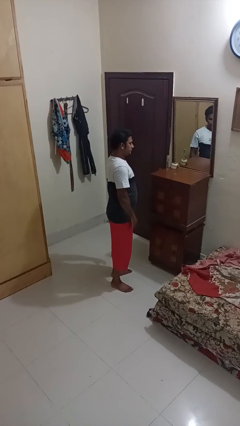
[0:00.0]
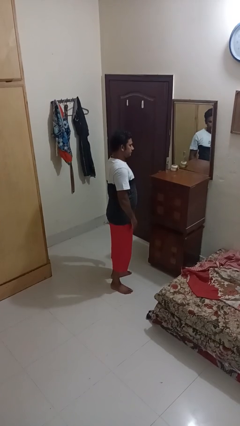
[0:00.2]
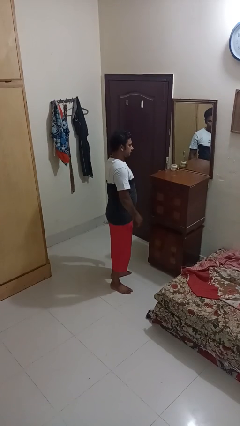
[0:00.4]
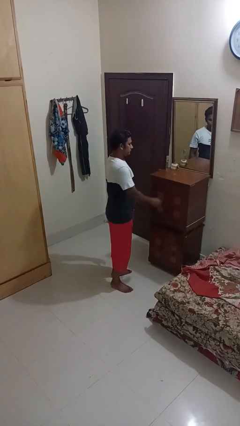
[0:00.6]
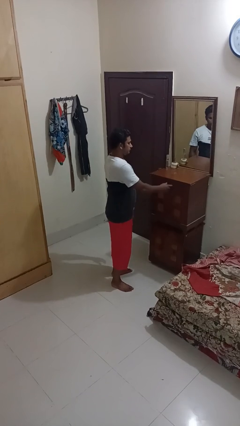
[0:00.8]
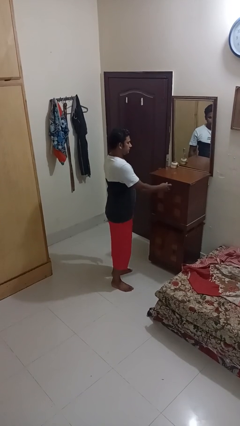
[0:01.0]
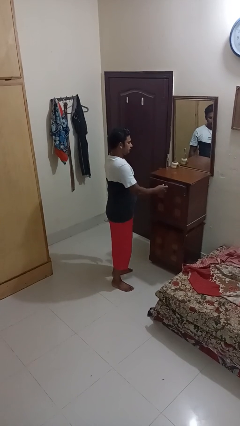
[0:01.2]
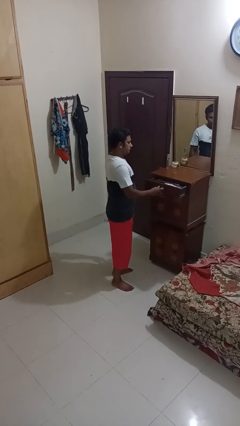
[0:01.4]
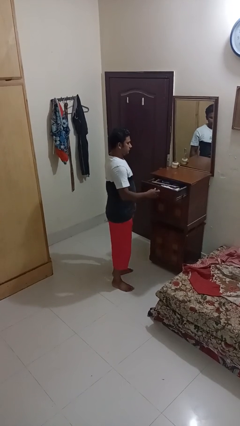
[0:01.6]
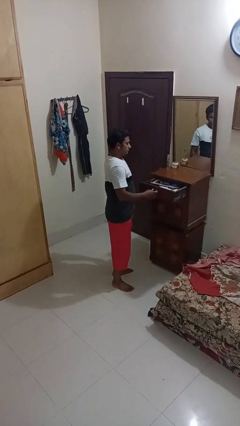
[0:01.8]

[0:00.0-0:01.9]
person opens dresser drawer

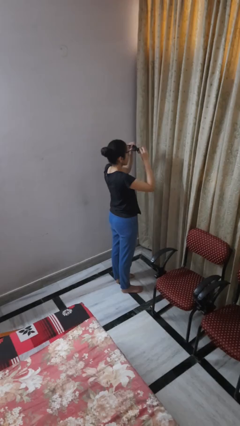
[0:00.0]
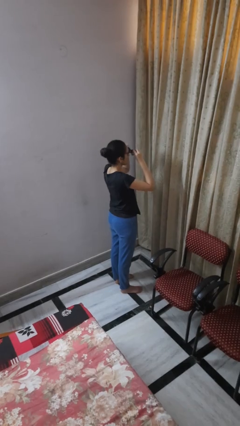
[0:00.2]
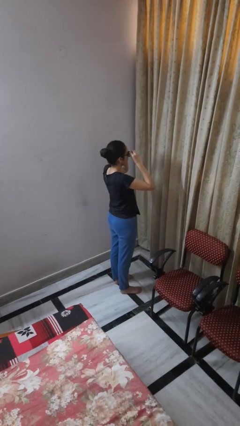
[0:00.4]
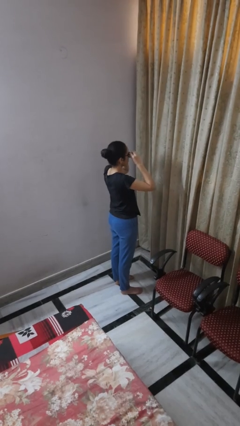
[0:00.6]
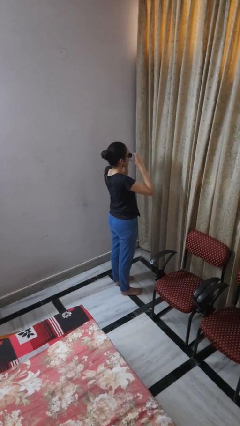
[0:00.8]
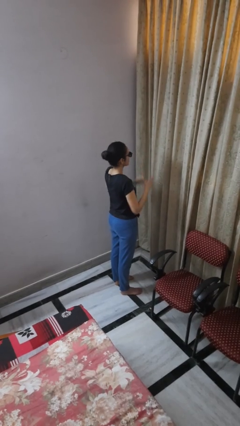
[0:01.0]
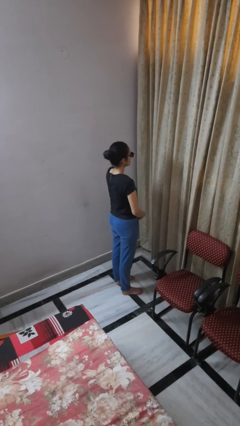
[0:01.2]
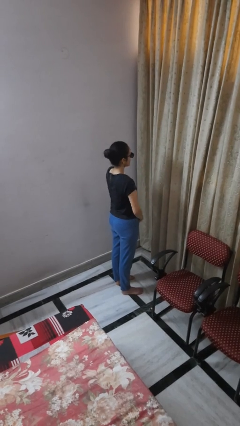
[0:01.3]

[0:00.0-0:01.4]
person puts on sunglasses

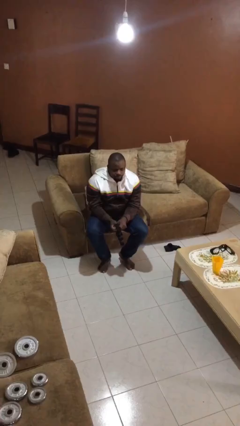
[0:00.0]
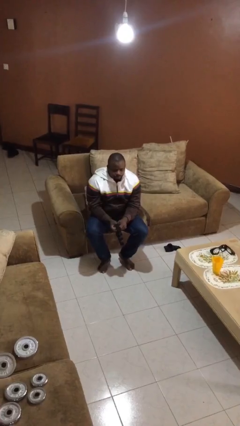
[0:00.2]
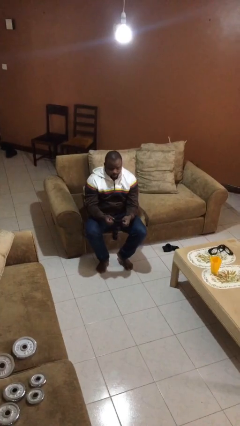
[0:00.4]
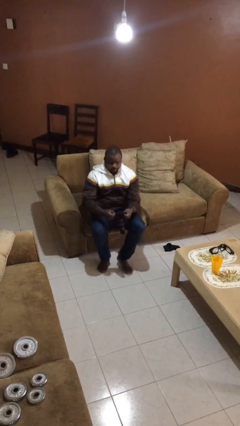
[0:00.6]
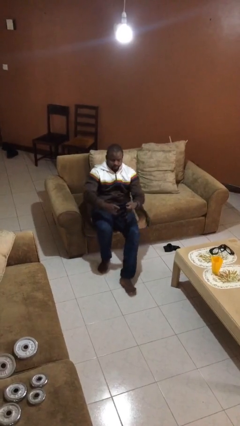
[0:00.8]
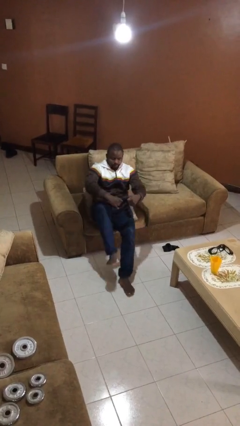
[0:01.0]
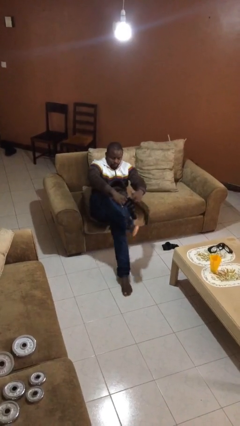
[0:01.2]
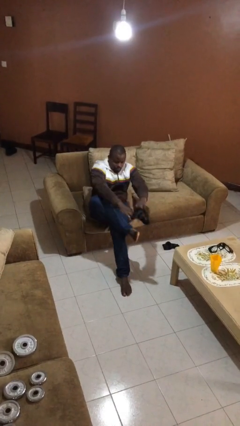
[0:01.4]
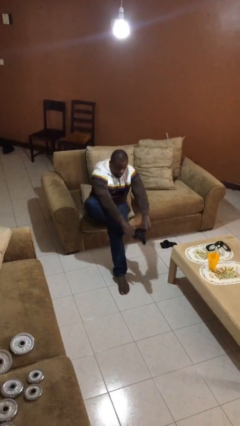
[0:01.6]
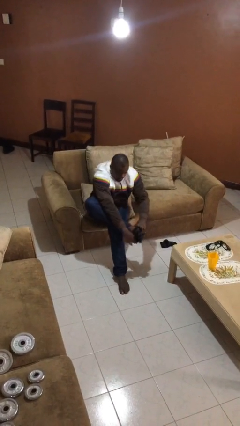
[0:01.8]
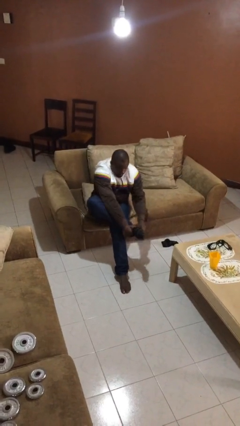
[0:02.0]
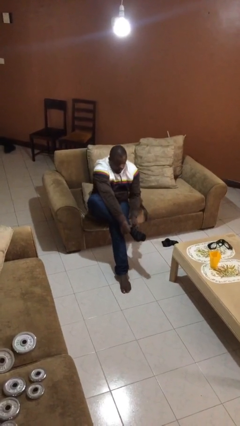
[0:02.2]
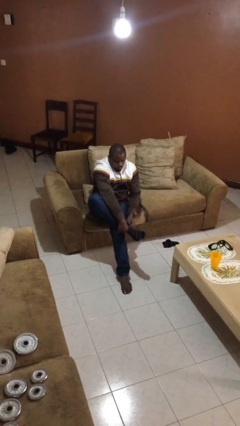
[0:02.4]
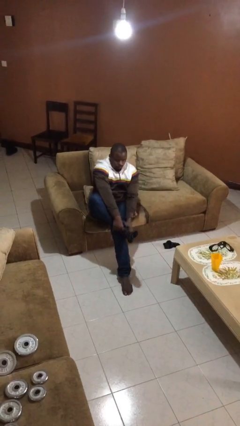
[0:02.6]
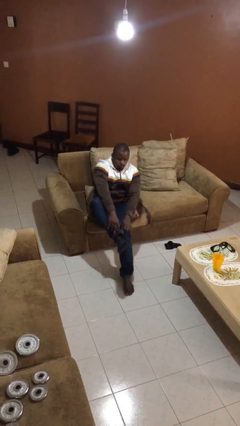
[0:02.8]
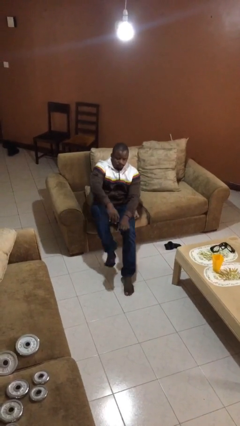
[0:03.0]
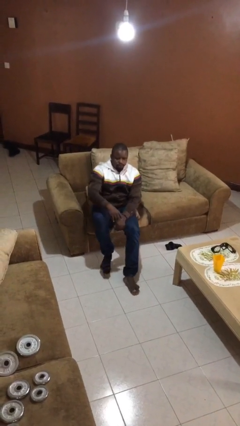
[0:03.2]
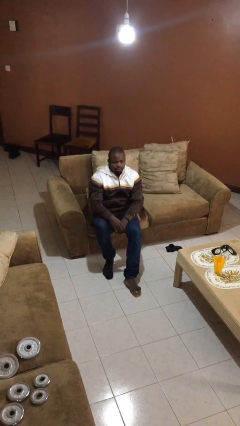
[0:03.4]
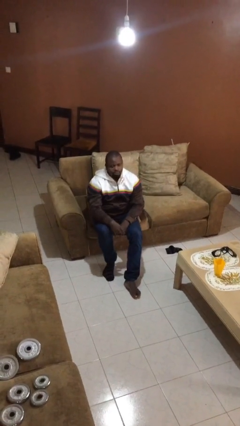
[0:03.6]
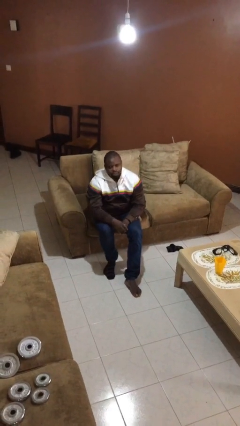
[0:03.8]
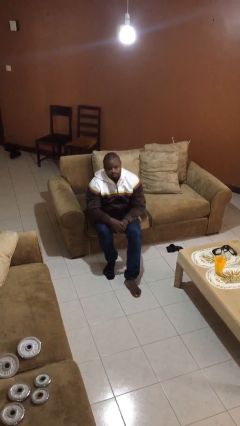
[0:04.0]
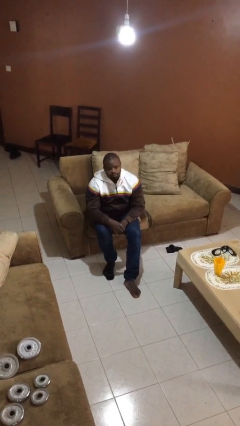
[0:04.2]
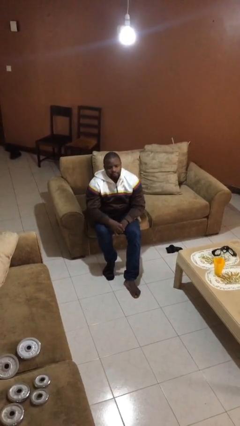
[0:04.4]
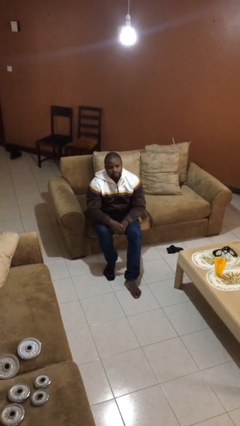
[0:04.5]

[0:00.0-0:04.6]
person puts on socks

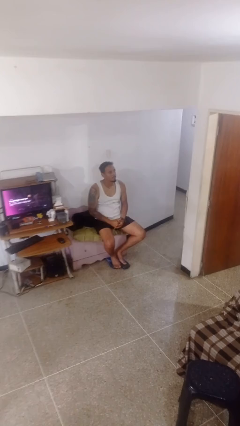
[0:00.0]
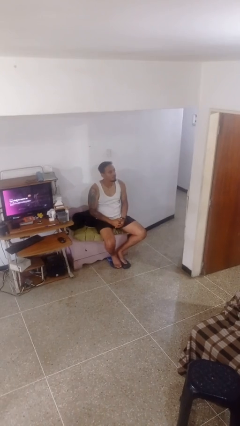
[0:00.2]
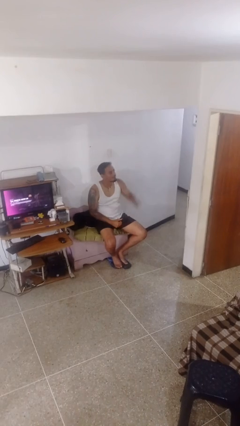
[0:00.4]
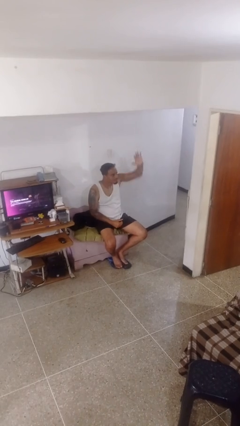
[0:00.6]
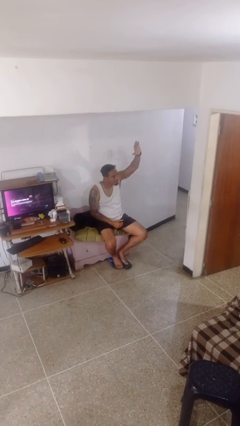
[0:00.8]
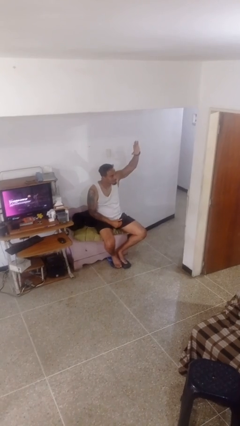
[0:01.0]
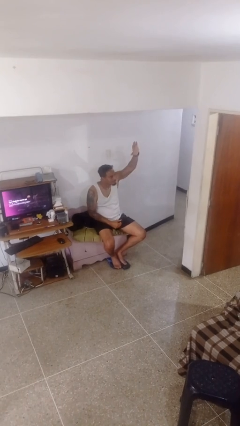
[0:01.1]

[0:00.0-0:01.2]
person gestures raise hand

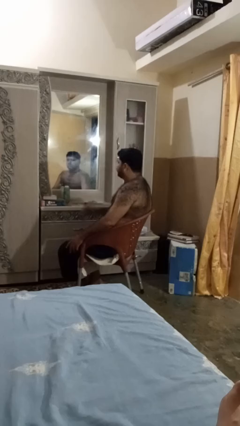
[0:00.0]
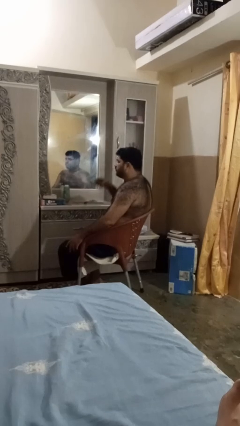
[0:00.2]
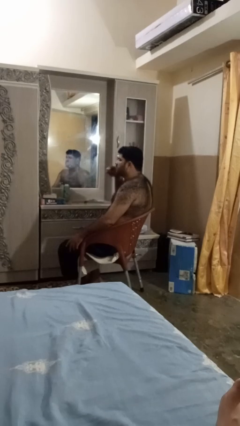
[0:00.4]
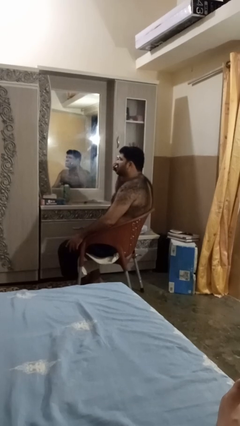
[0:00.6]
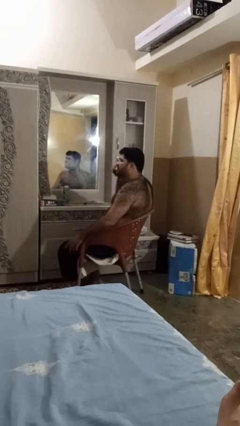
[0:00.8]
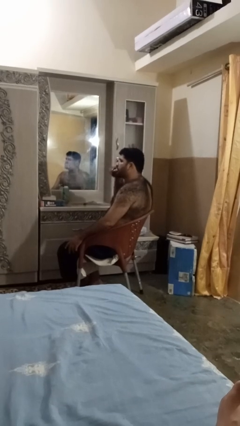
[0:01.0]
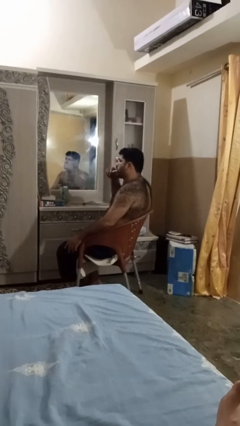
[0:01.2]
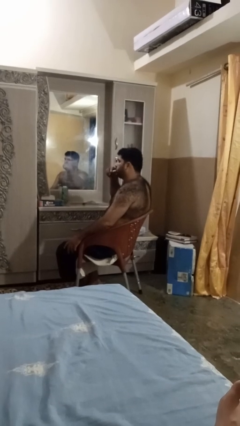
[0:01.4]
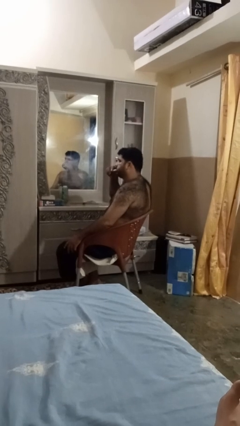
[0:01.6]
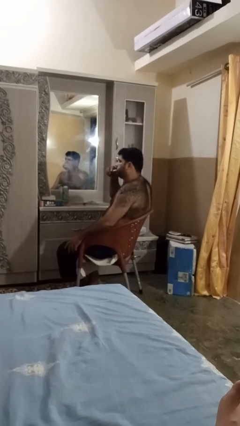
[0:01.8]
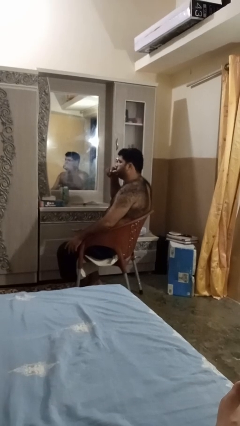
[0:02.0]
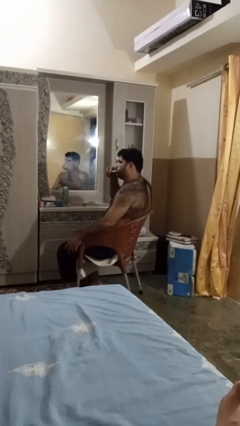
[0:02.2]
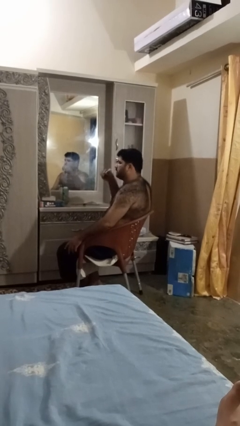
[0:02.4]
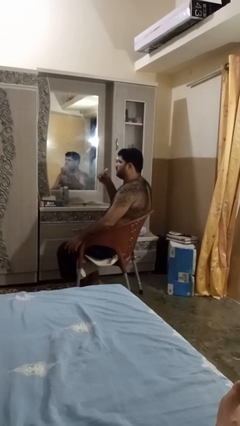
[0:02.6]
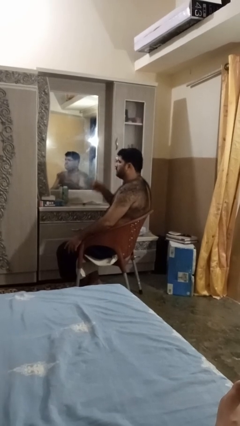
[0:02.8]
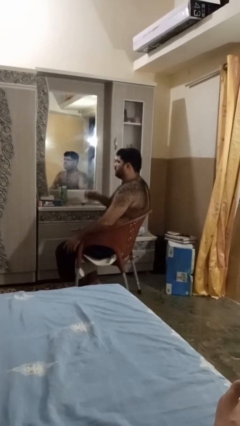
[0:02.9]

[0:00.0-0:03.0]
person brushes teeth

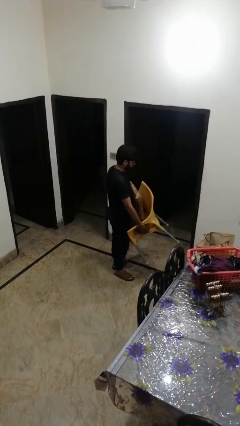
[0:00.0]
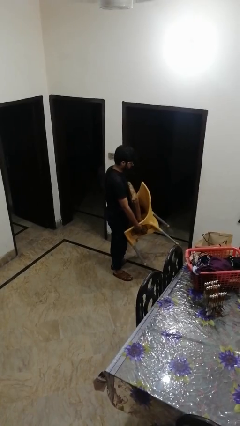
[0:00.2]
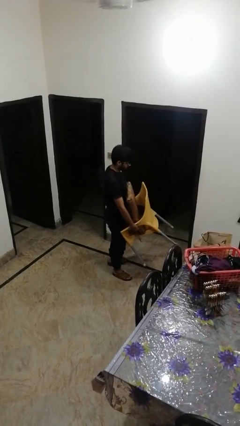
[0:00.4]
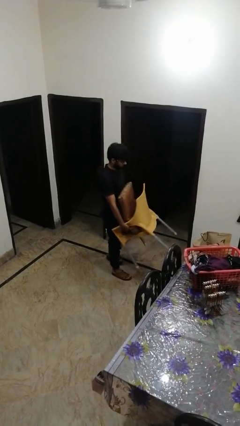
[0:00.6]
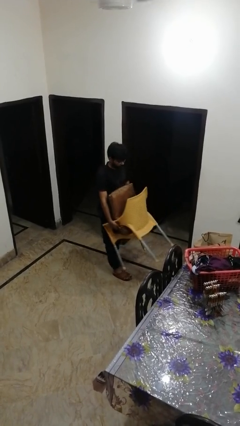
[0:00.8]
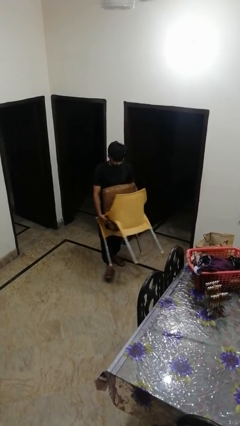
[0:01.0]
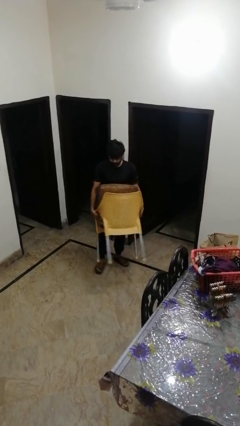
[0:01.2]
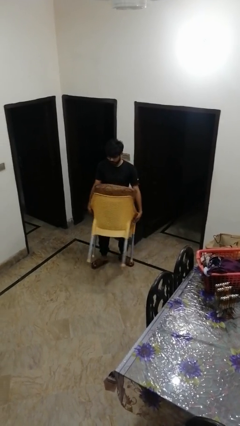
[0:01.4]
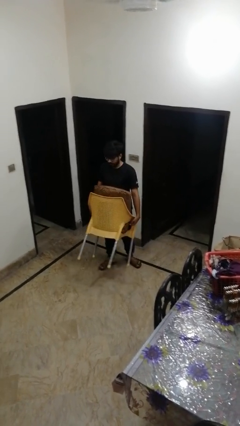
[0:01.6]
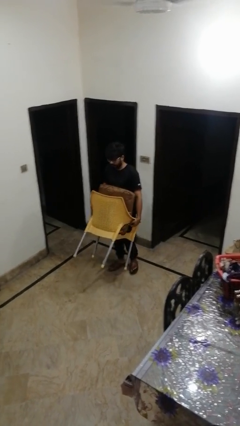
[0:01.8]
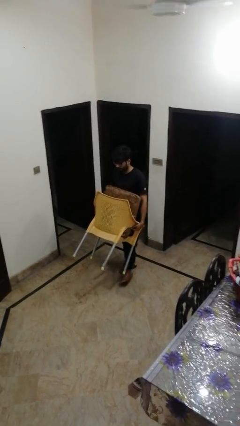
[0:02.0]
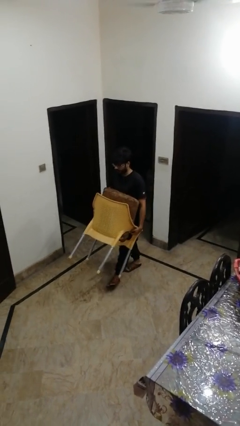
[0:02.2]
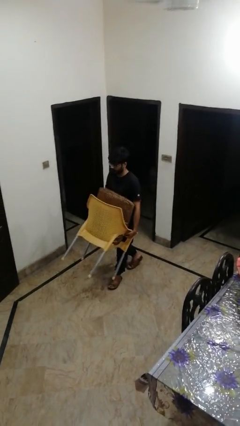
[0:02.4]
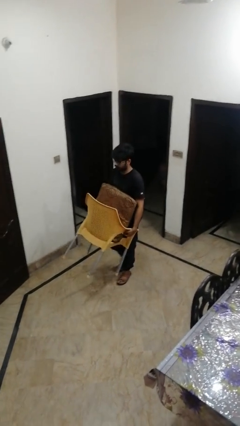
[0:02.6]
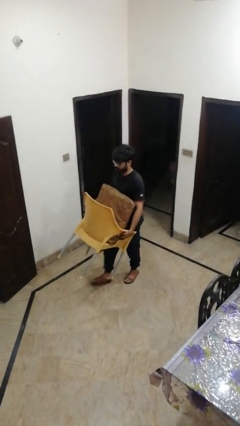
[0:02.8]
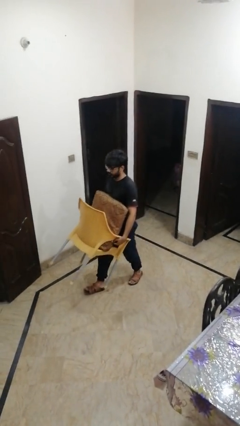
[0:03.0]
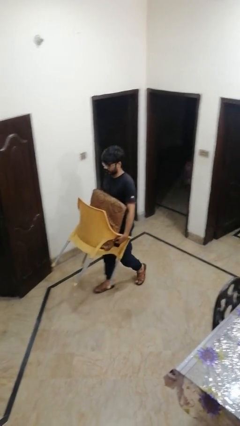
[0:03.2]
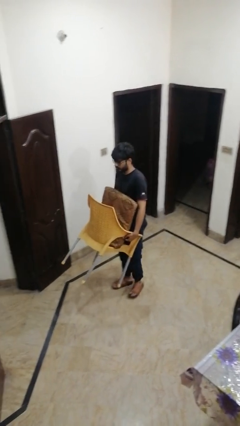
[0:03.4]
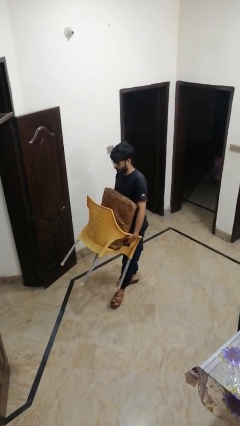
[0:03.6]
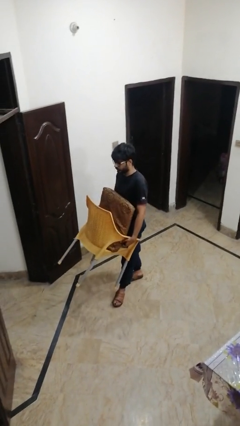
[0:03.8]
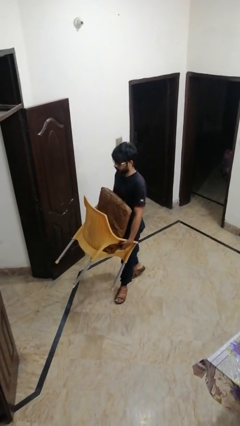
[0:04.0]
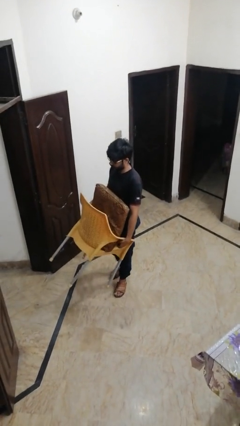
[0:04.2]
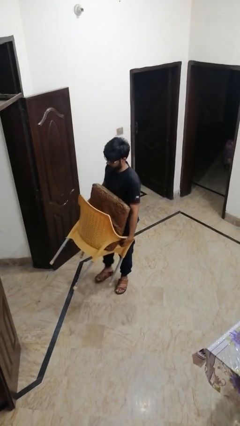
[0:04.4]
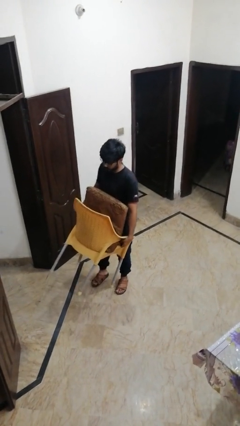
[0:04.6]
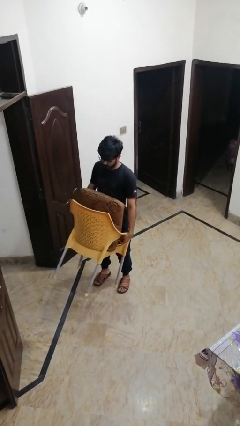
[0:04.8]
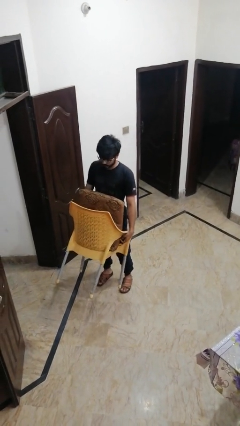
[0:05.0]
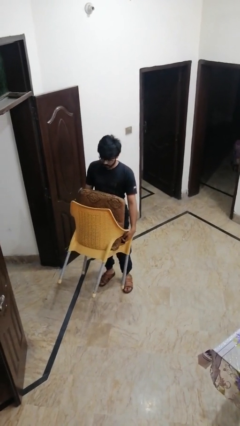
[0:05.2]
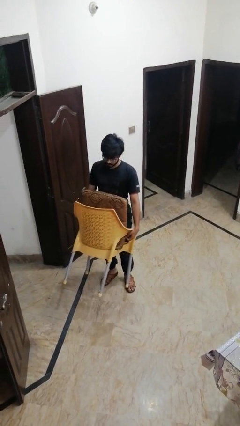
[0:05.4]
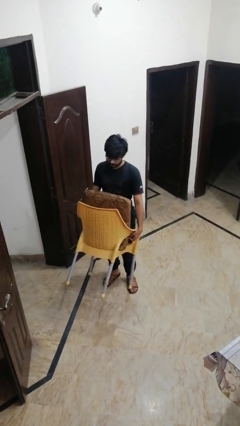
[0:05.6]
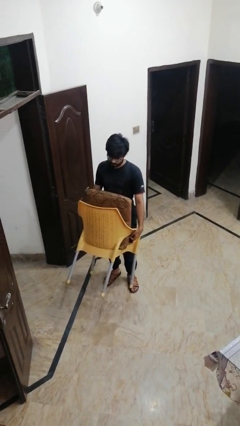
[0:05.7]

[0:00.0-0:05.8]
person carries furniture
